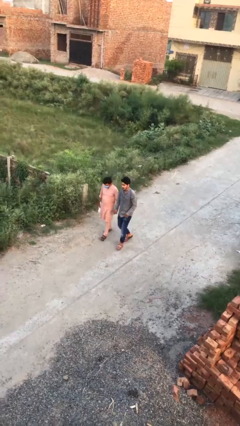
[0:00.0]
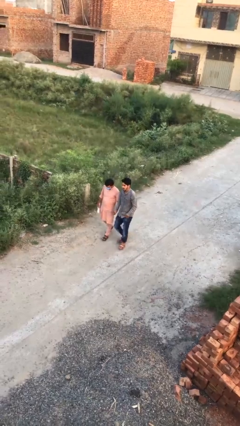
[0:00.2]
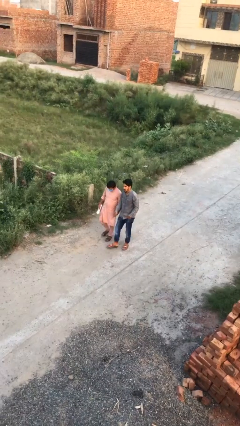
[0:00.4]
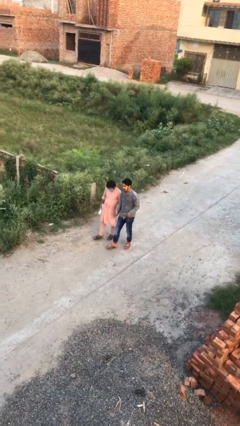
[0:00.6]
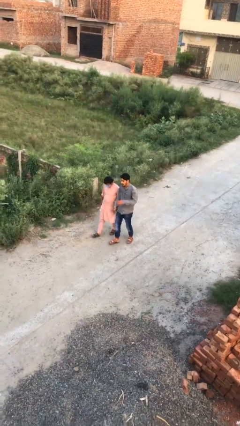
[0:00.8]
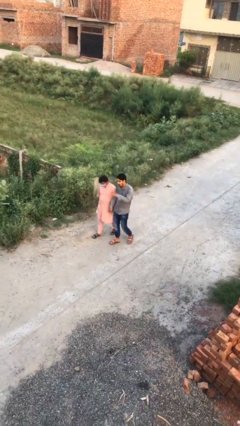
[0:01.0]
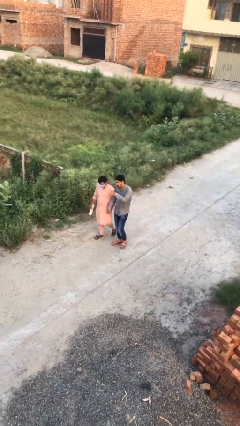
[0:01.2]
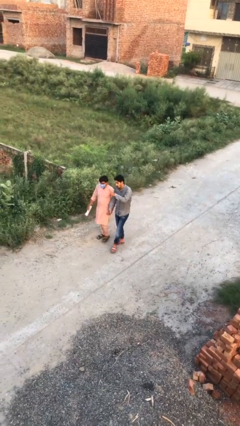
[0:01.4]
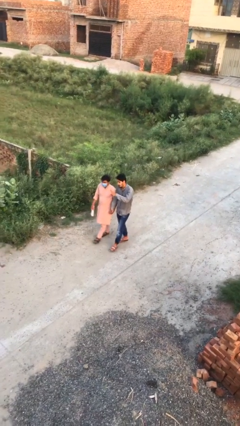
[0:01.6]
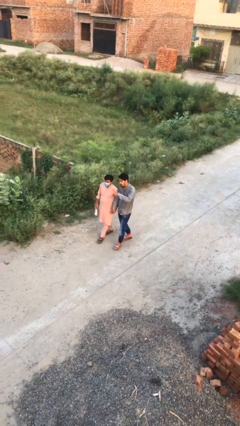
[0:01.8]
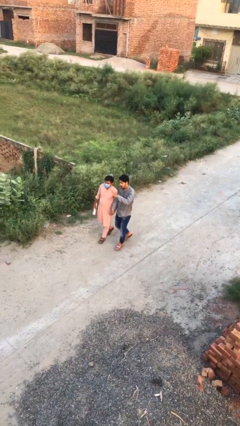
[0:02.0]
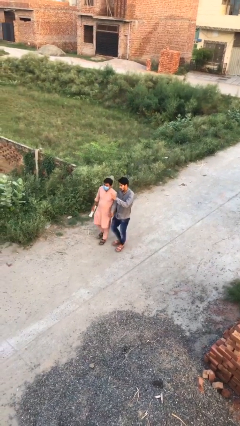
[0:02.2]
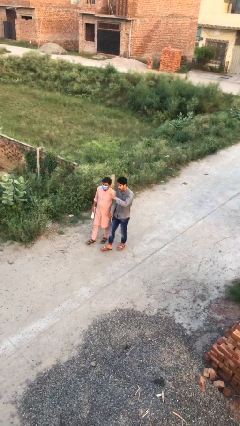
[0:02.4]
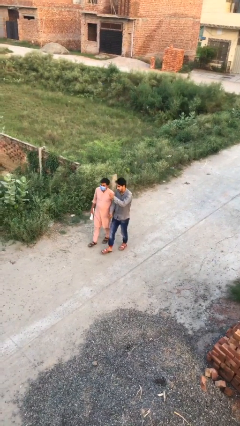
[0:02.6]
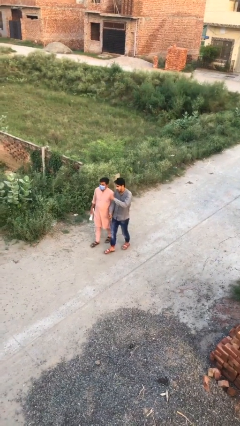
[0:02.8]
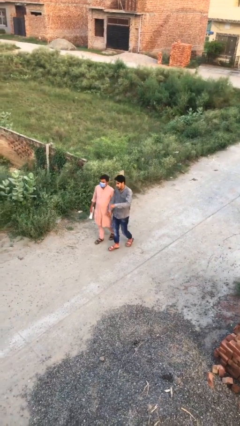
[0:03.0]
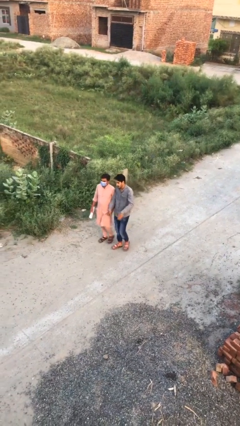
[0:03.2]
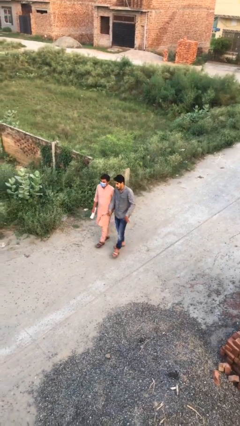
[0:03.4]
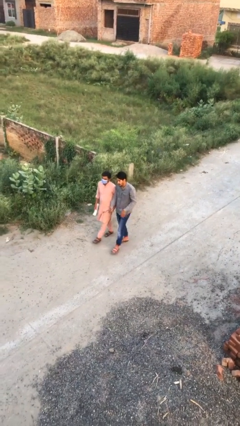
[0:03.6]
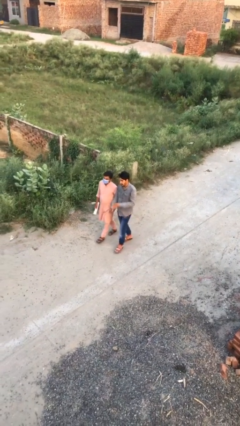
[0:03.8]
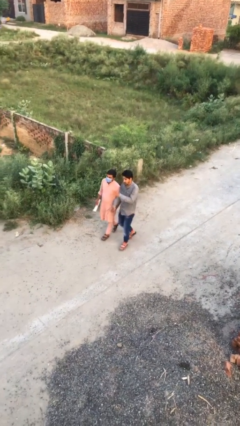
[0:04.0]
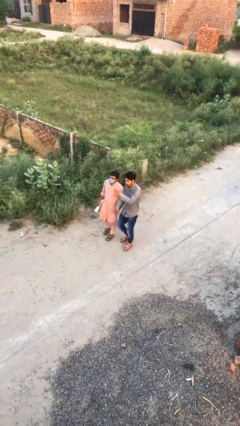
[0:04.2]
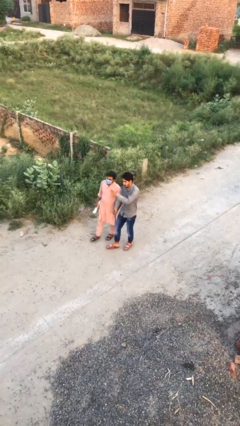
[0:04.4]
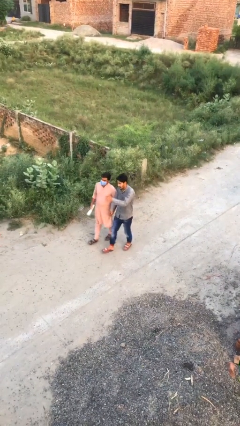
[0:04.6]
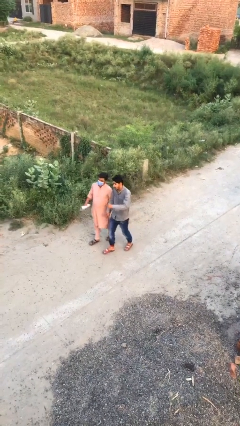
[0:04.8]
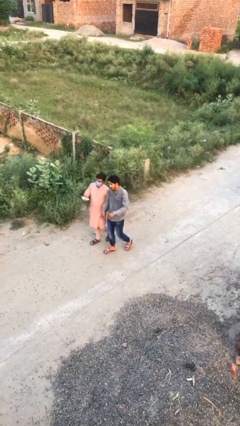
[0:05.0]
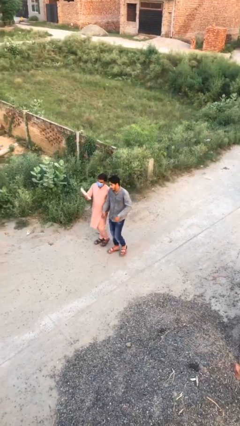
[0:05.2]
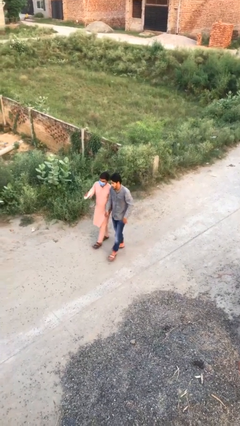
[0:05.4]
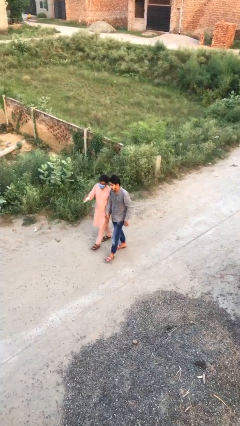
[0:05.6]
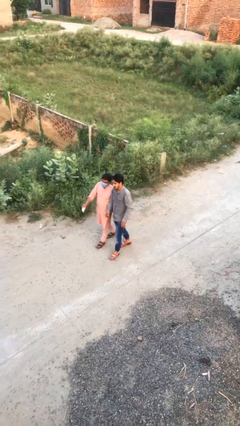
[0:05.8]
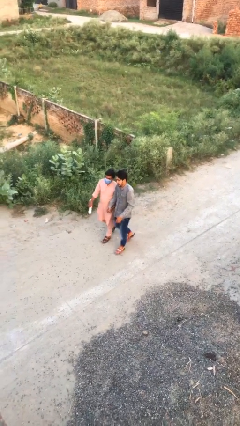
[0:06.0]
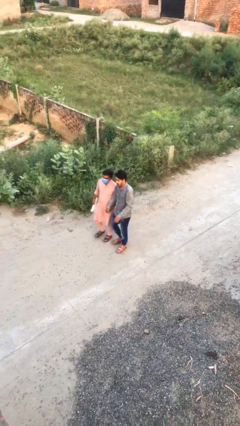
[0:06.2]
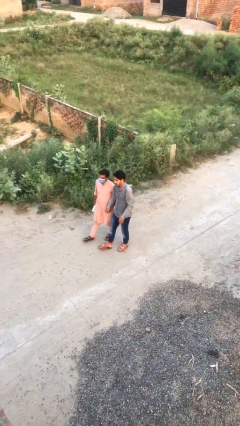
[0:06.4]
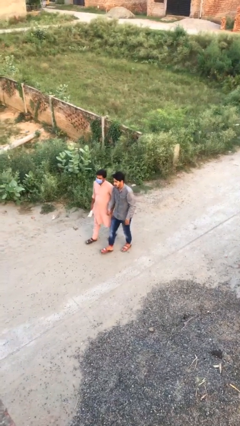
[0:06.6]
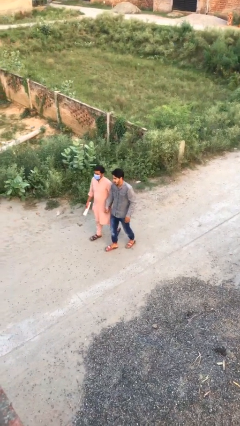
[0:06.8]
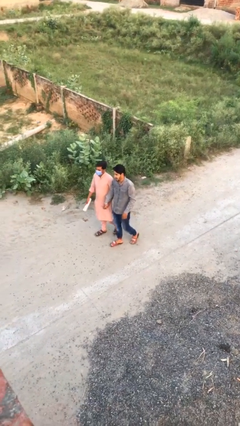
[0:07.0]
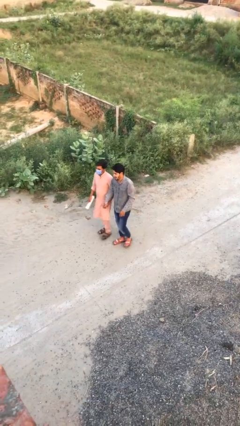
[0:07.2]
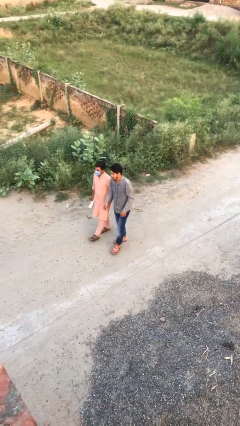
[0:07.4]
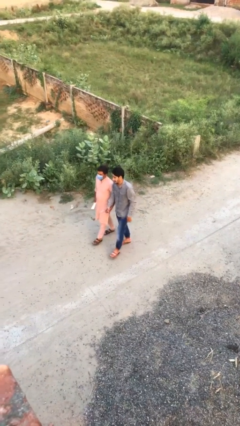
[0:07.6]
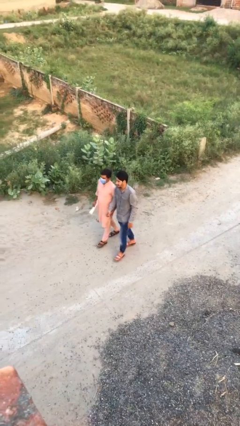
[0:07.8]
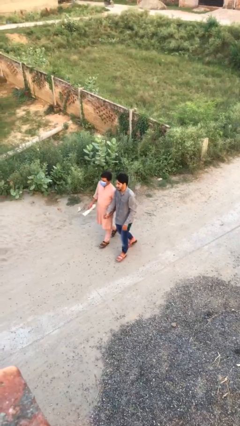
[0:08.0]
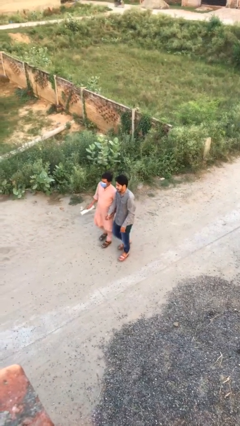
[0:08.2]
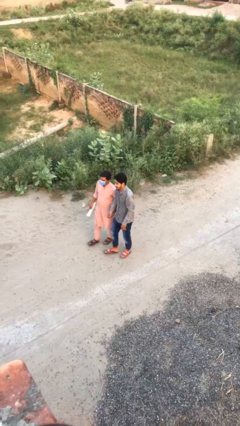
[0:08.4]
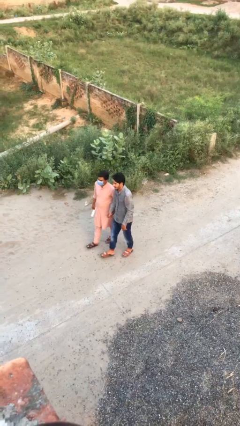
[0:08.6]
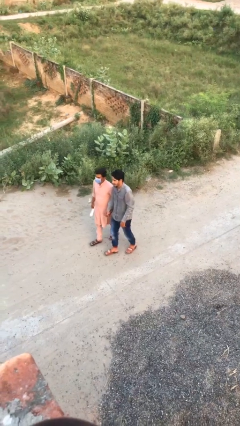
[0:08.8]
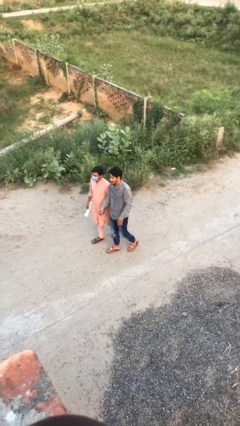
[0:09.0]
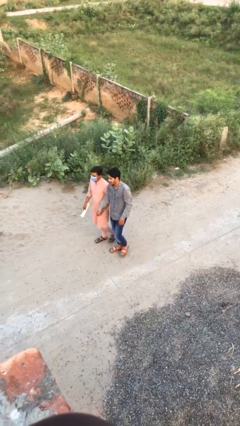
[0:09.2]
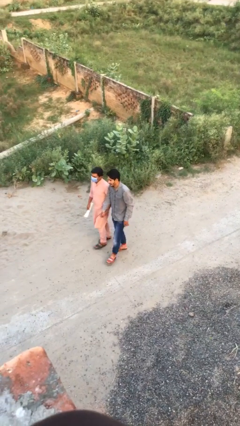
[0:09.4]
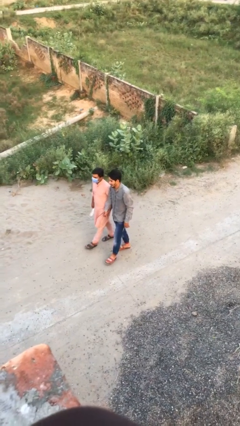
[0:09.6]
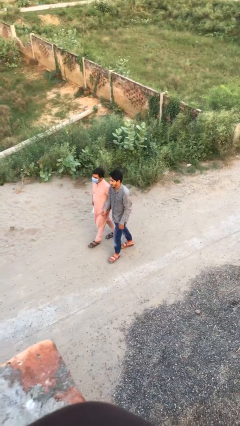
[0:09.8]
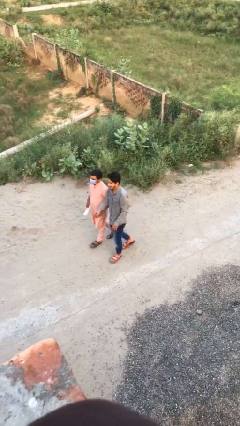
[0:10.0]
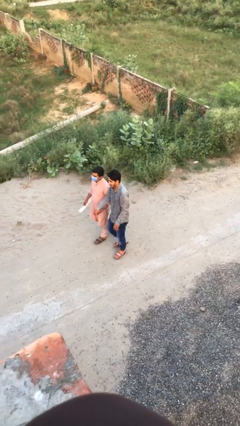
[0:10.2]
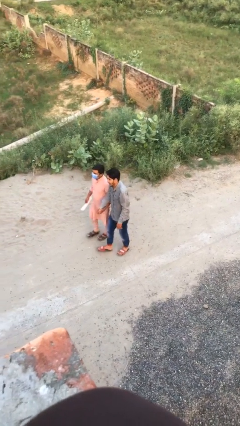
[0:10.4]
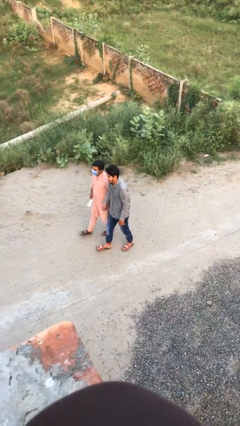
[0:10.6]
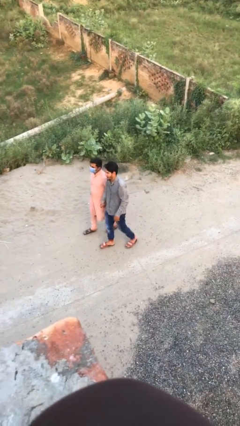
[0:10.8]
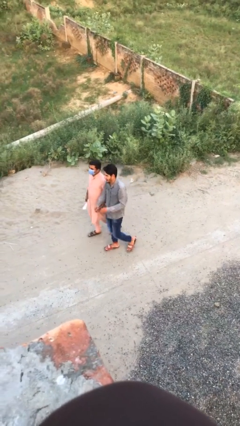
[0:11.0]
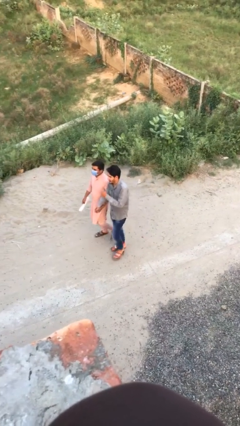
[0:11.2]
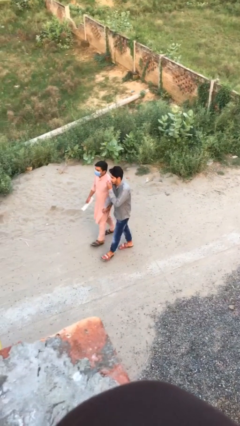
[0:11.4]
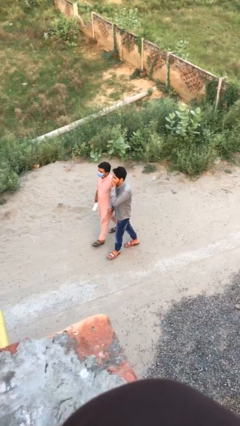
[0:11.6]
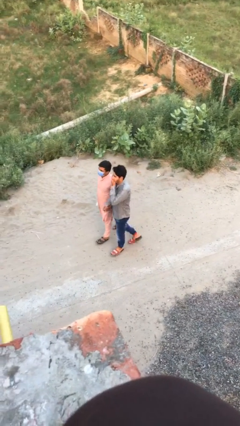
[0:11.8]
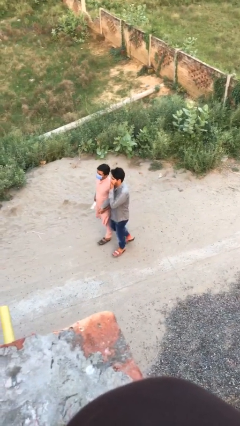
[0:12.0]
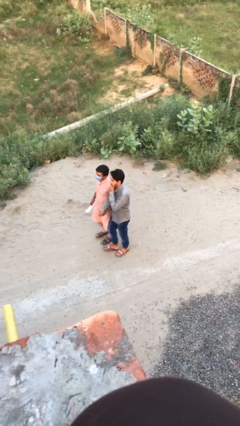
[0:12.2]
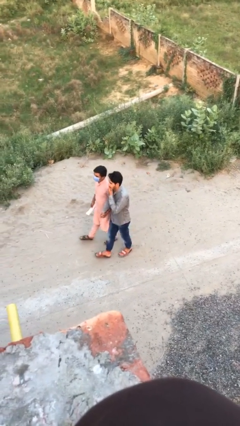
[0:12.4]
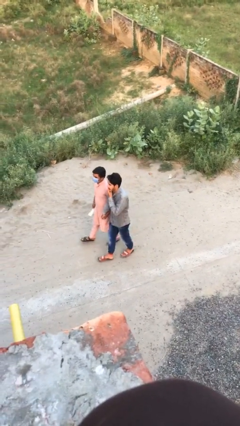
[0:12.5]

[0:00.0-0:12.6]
person holds hand

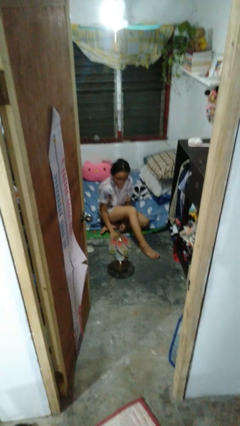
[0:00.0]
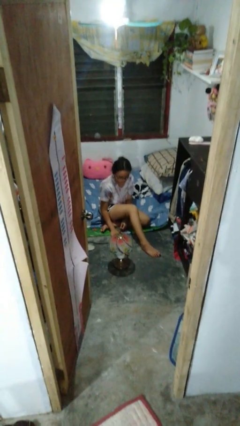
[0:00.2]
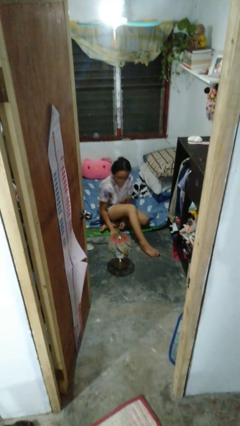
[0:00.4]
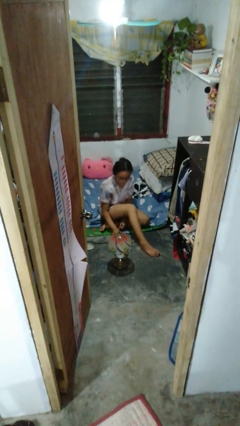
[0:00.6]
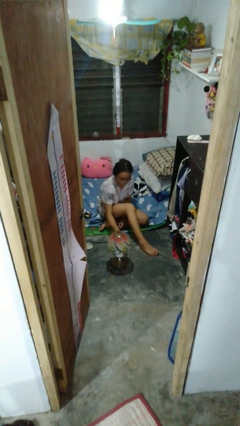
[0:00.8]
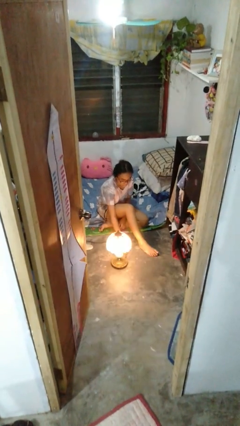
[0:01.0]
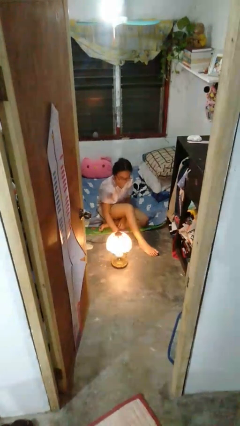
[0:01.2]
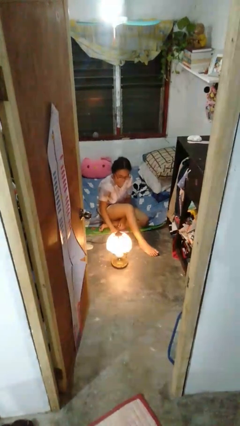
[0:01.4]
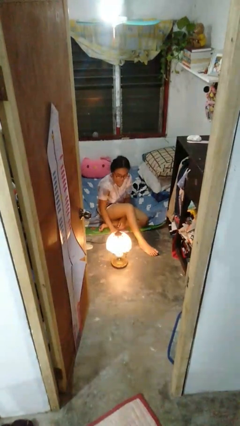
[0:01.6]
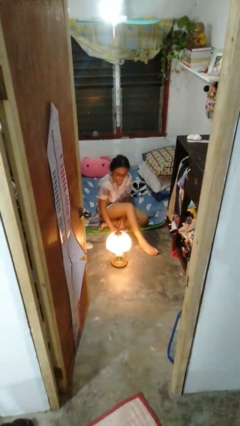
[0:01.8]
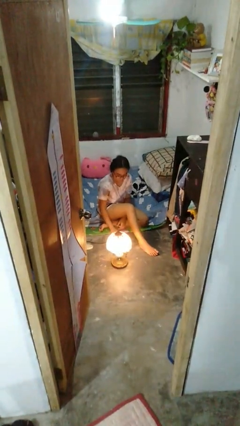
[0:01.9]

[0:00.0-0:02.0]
person turns on lamp

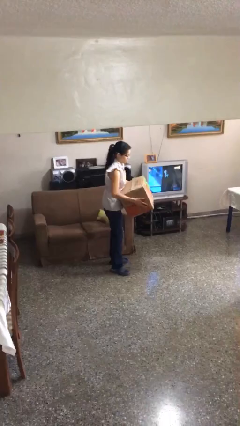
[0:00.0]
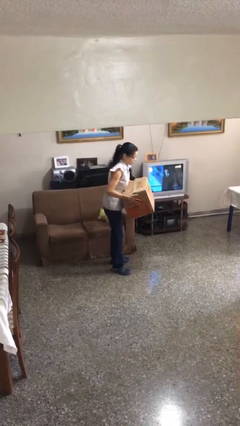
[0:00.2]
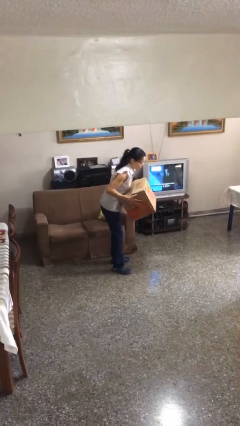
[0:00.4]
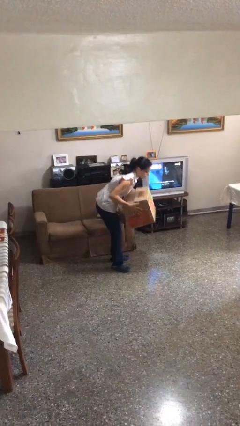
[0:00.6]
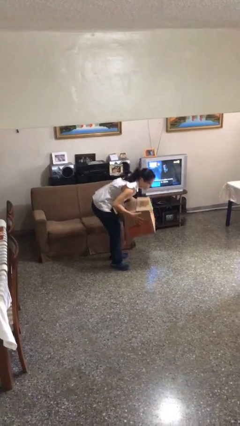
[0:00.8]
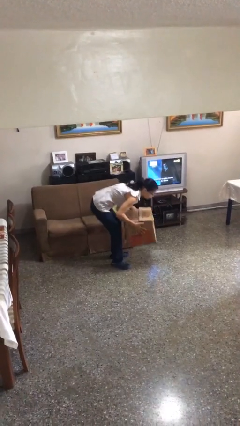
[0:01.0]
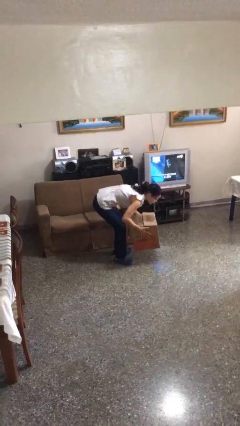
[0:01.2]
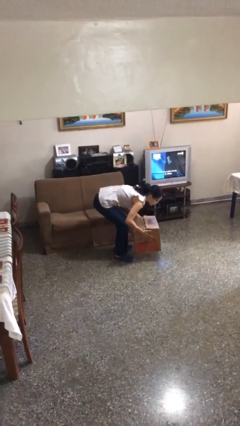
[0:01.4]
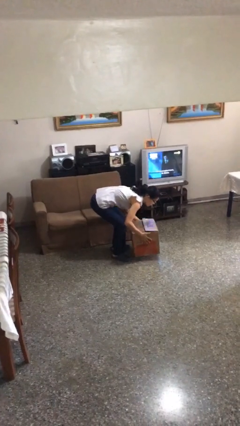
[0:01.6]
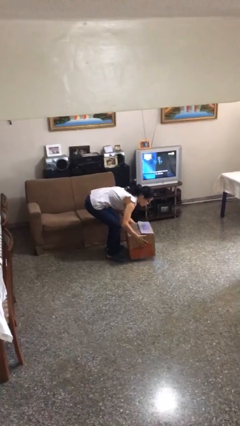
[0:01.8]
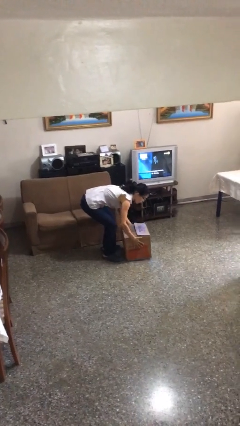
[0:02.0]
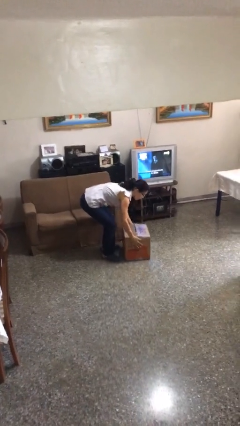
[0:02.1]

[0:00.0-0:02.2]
person puts down object on floor

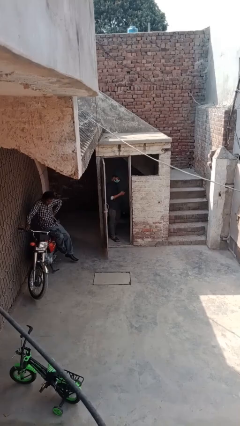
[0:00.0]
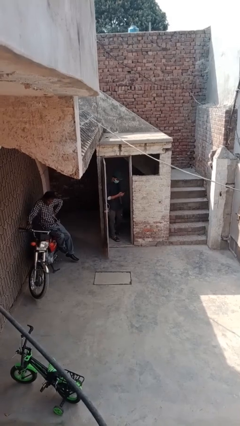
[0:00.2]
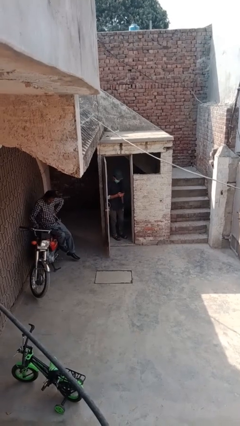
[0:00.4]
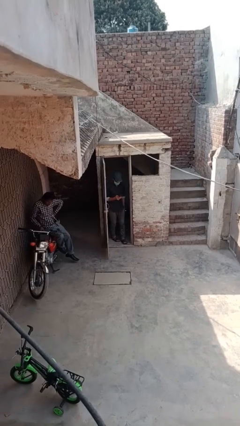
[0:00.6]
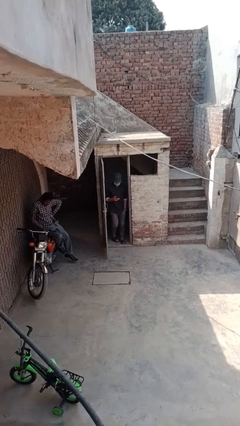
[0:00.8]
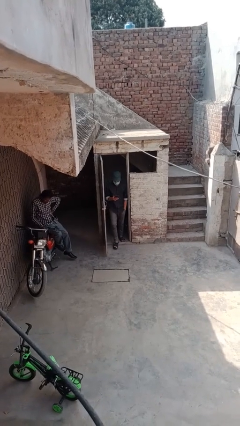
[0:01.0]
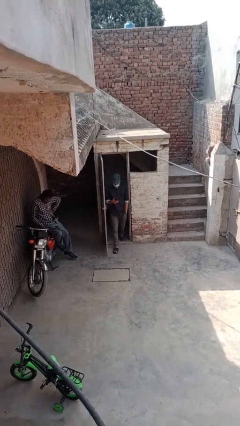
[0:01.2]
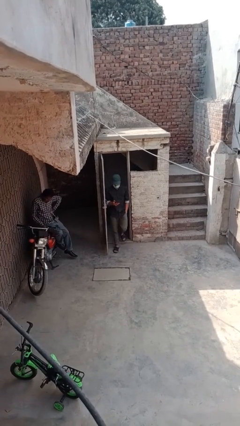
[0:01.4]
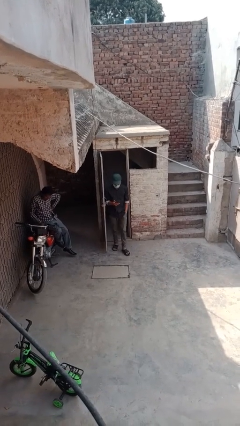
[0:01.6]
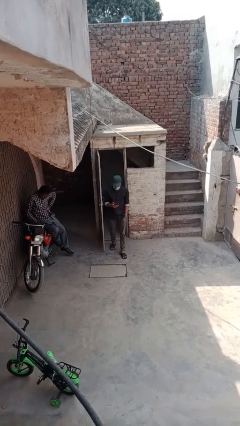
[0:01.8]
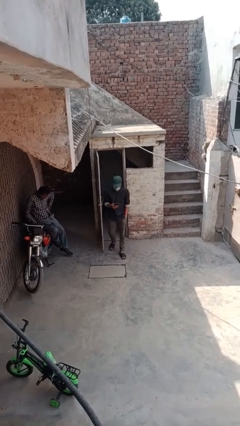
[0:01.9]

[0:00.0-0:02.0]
person enters scene through structure
